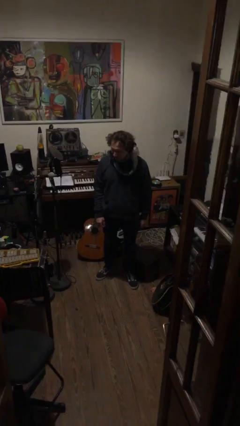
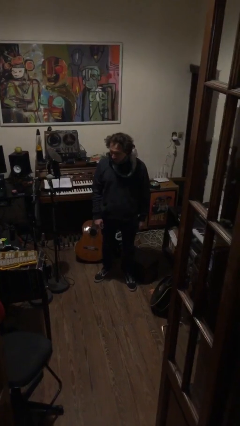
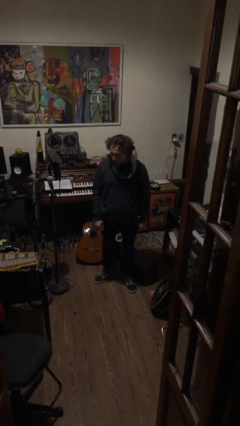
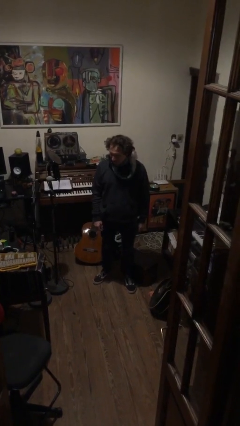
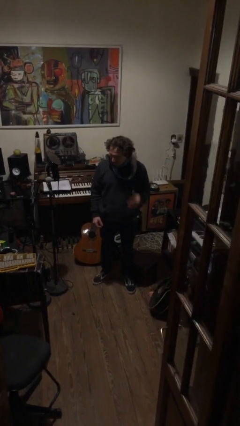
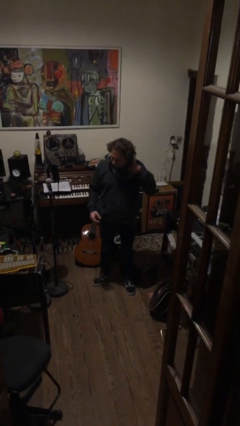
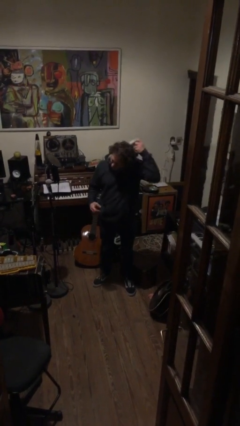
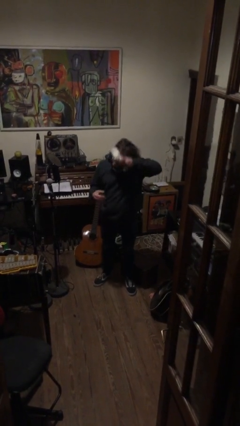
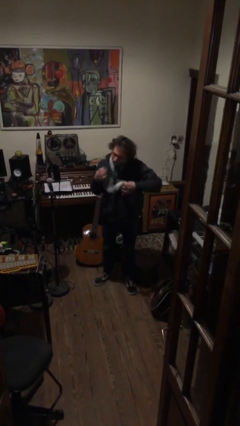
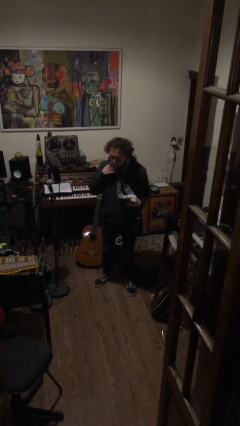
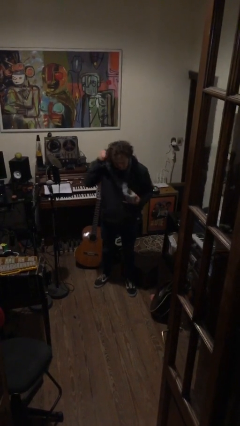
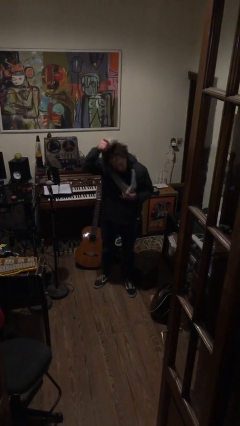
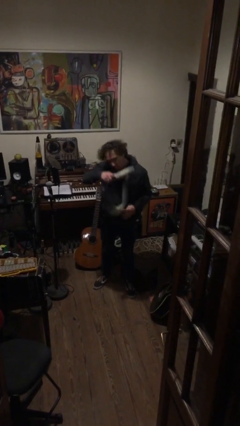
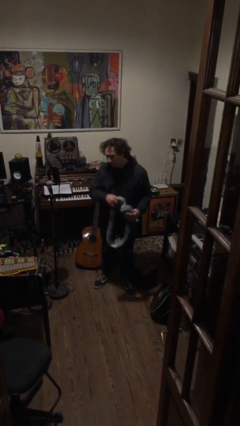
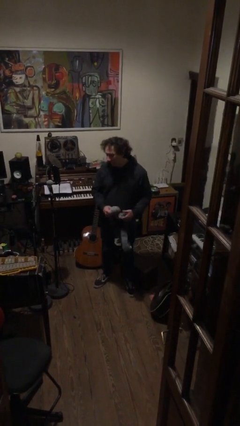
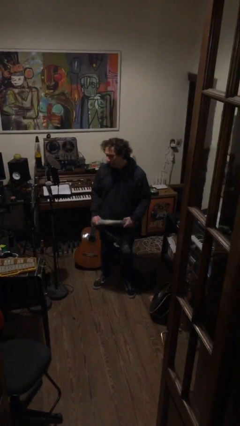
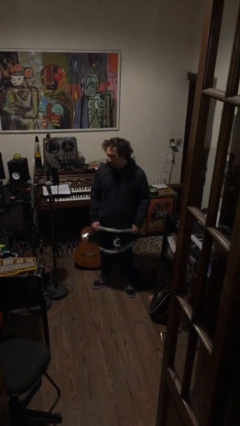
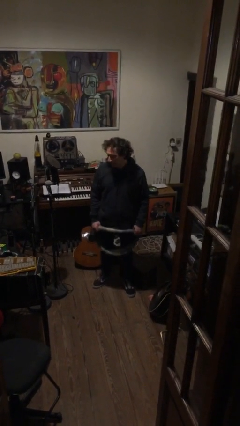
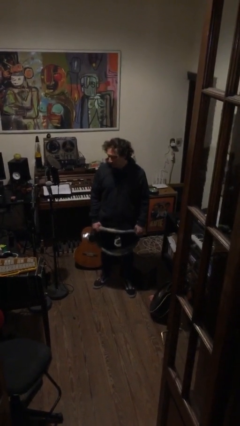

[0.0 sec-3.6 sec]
person takes off scarf

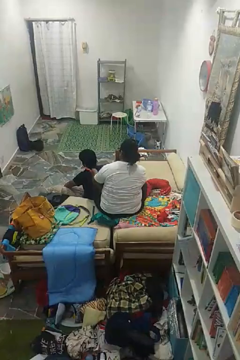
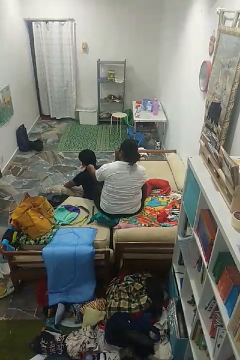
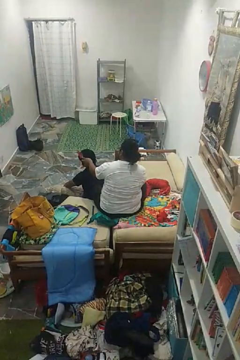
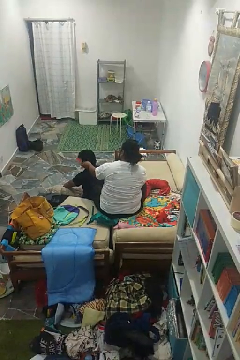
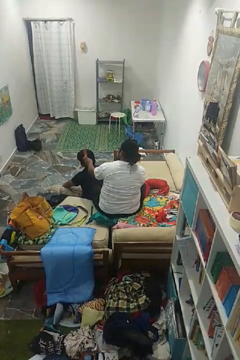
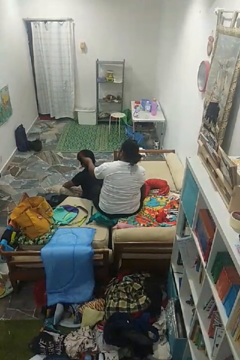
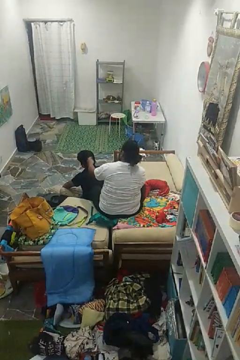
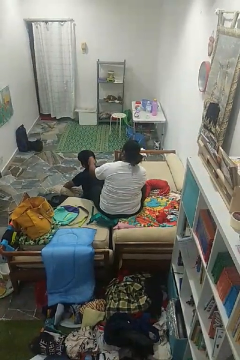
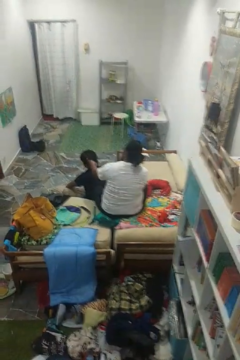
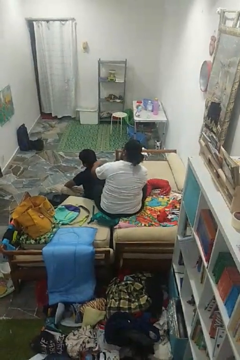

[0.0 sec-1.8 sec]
person brushes hair of person

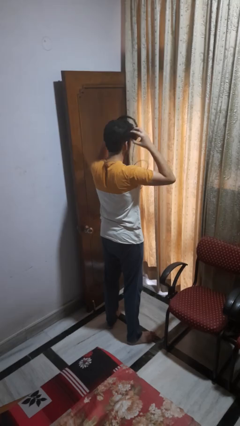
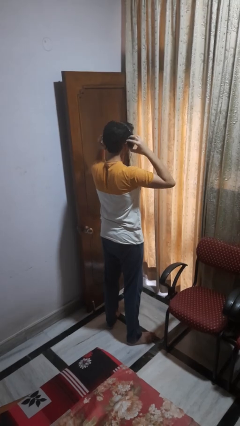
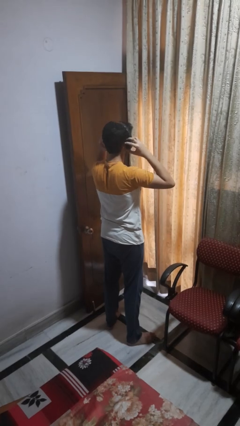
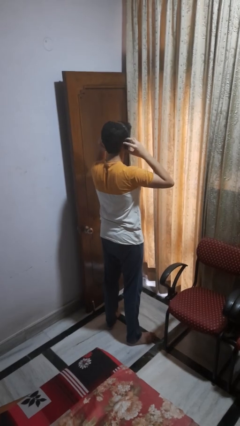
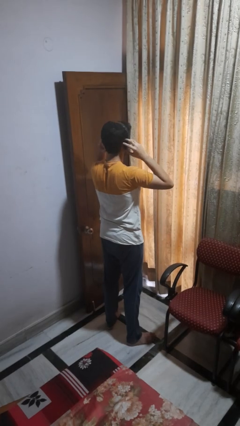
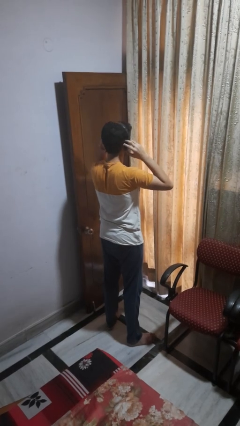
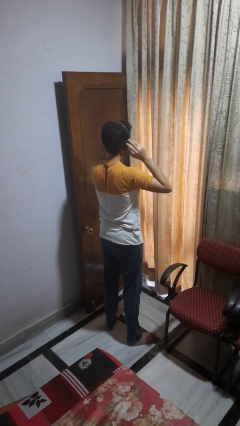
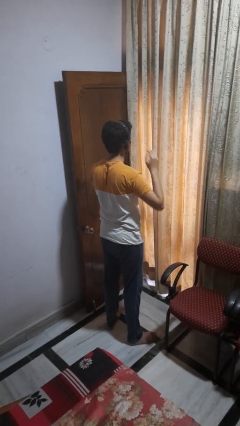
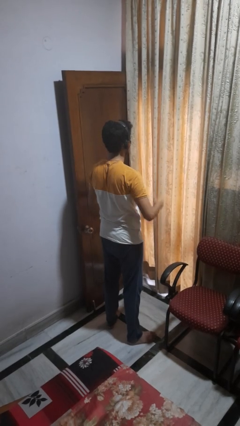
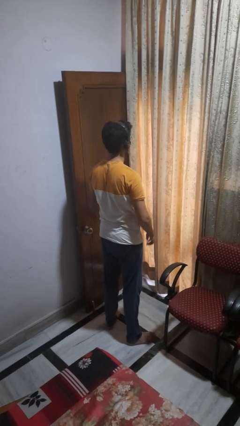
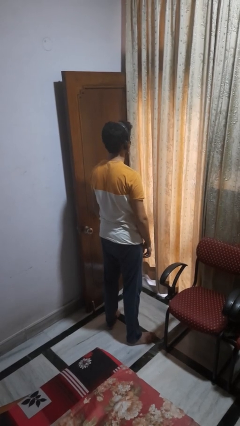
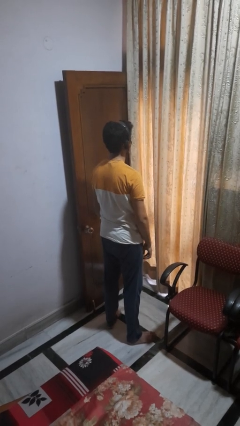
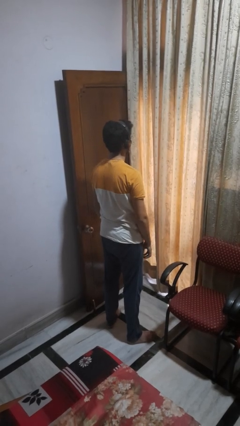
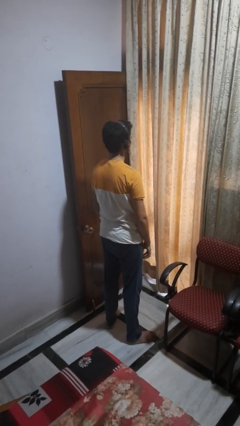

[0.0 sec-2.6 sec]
person puts on headphones

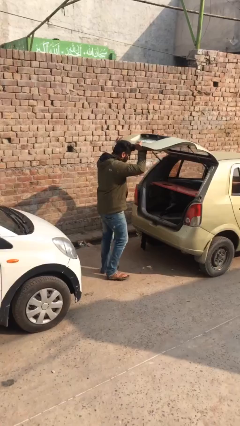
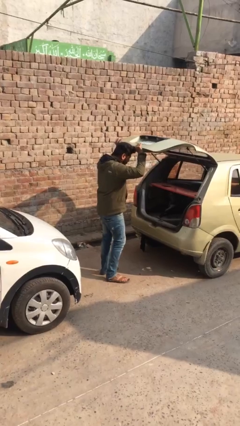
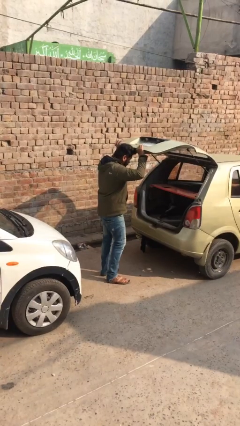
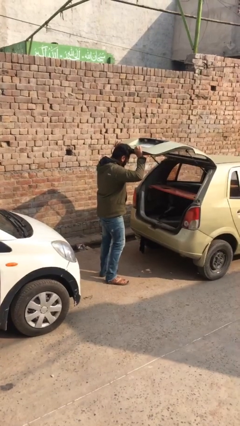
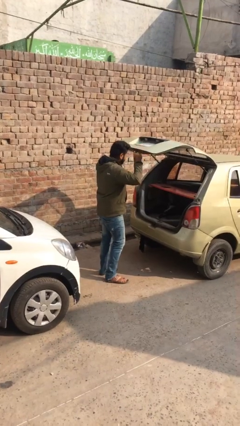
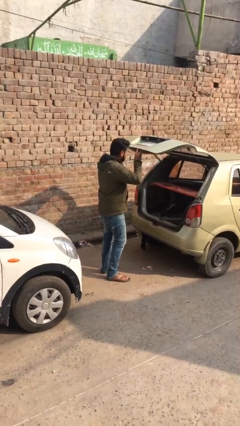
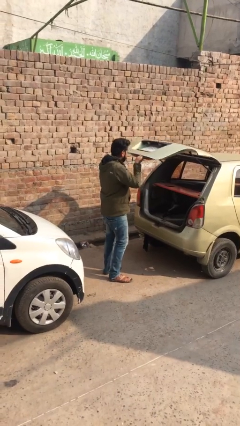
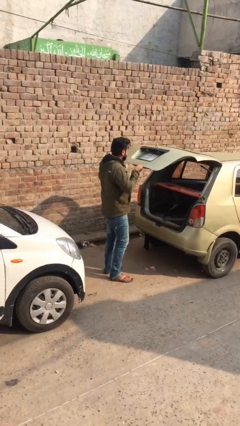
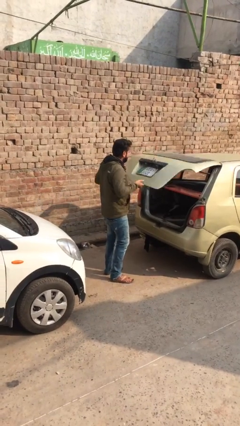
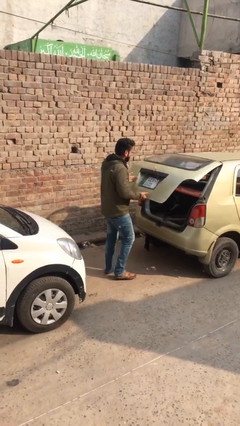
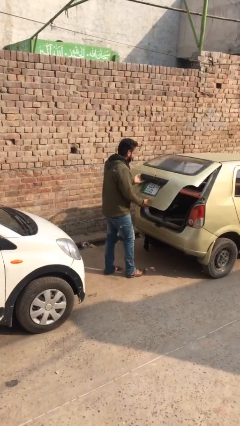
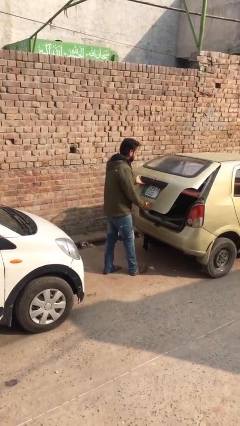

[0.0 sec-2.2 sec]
person closes car trunk

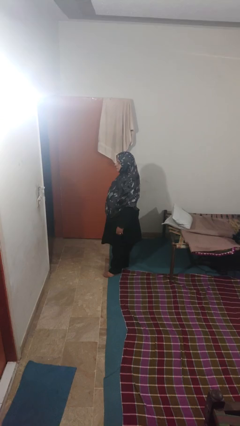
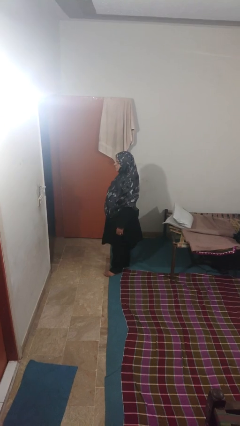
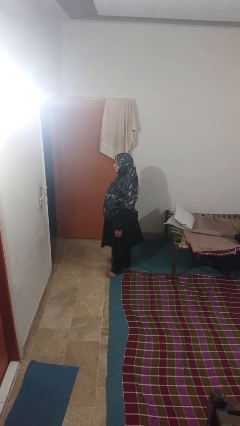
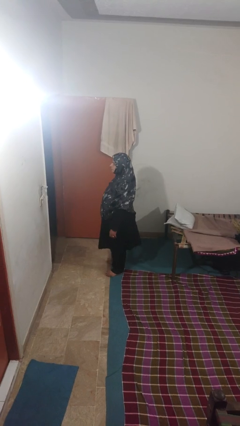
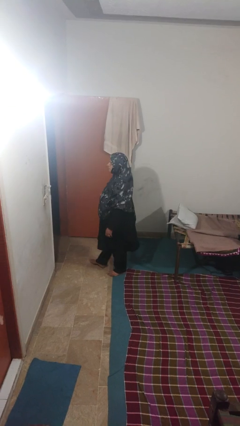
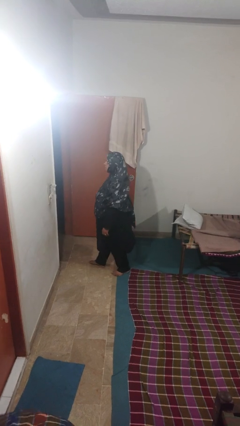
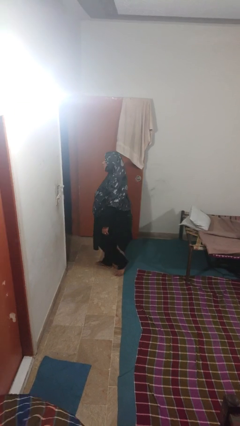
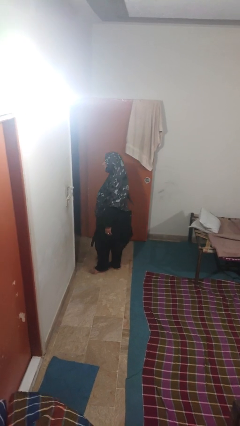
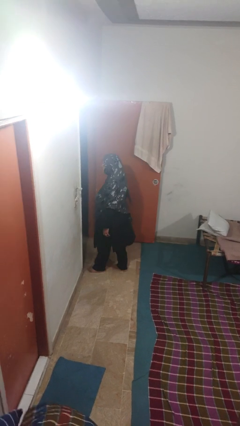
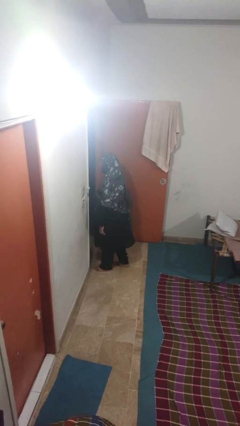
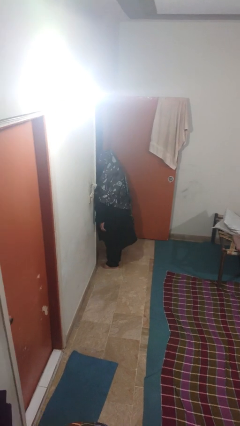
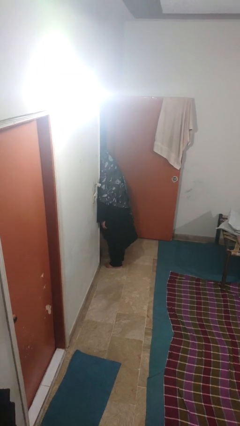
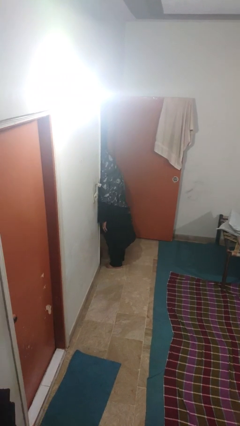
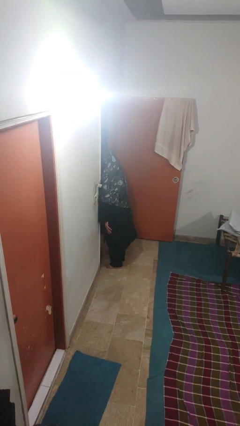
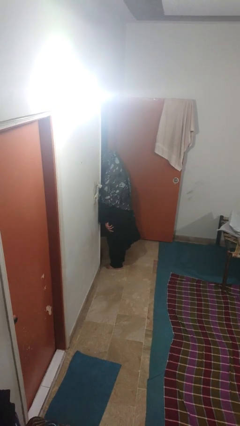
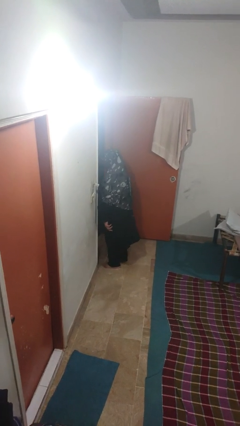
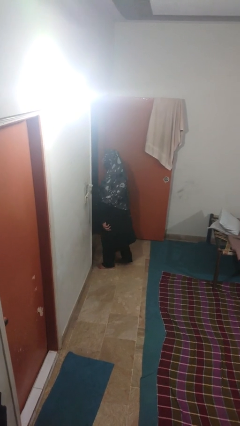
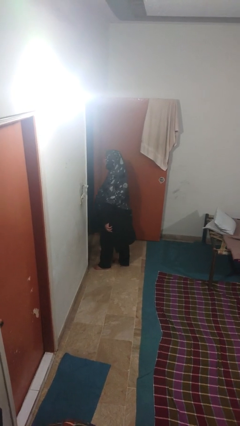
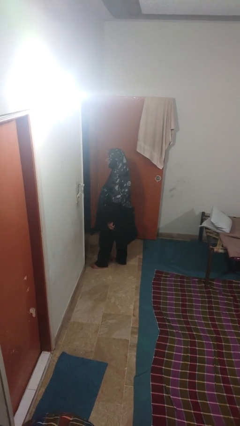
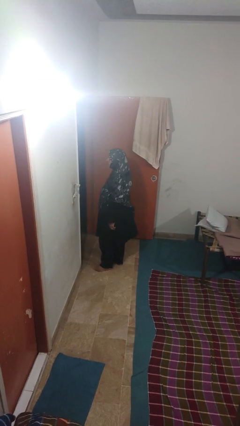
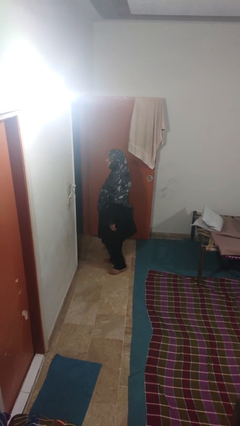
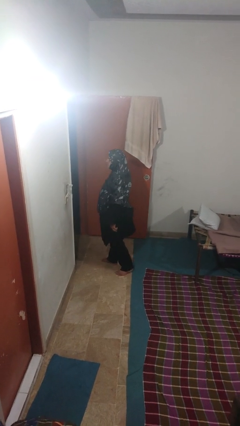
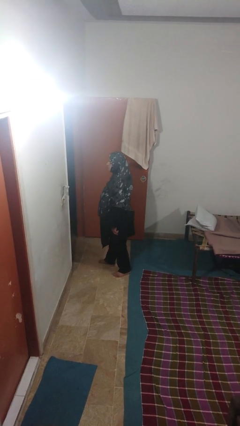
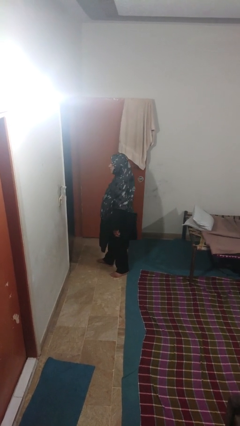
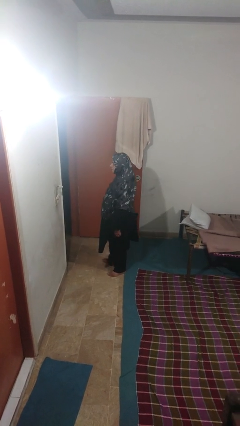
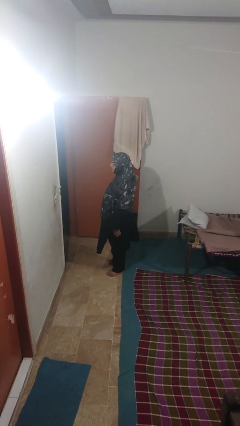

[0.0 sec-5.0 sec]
person bumps into wall

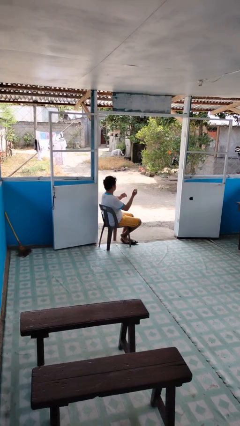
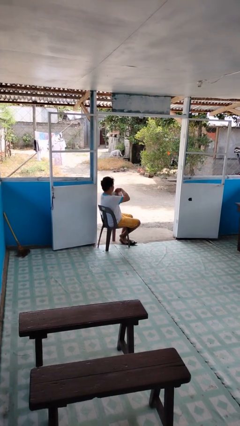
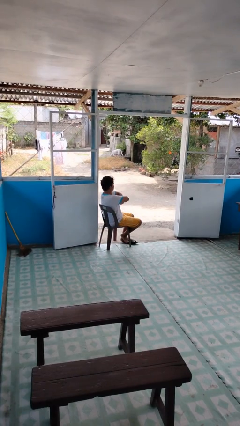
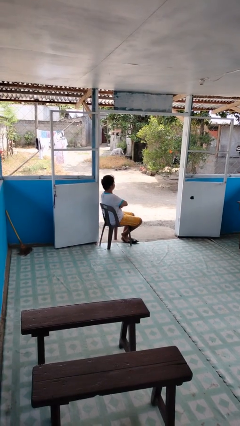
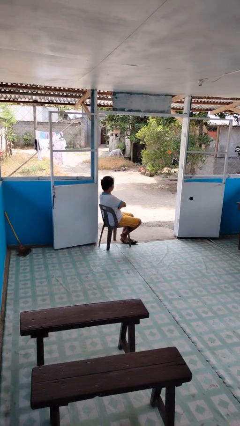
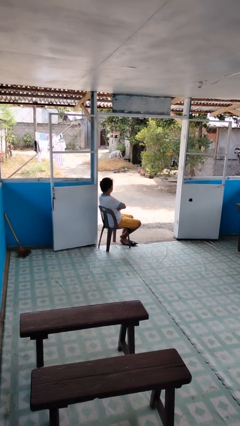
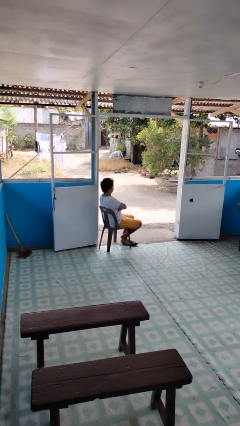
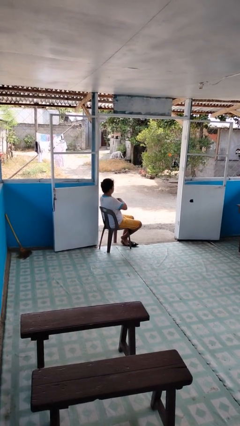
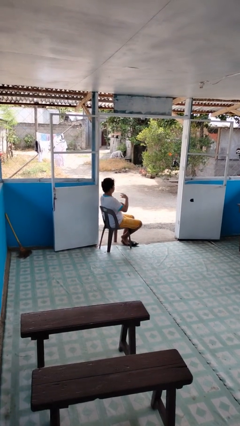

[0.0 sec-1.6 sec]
person crosses arms

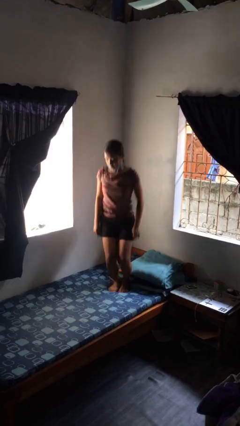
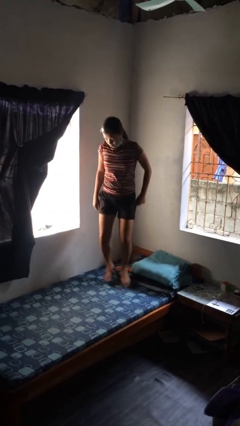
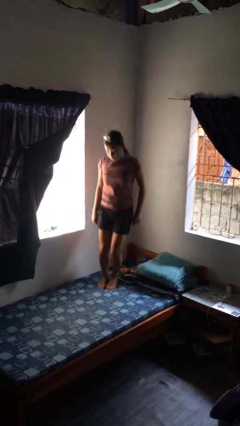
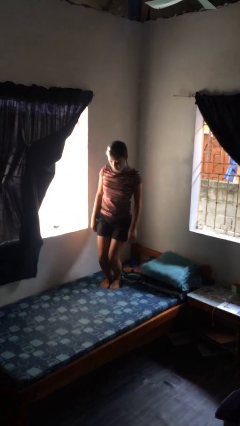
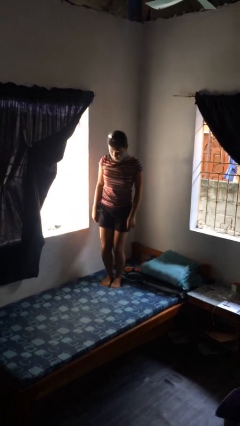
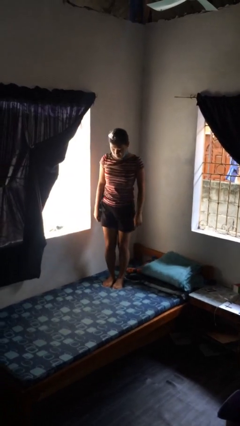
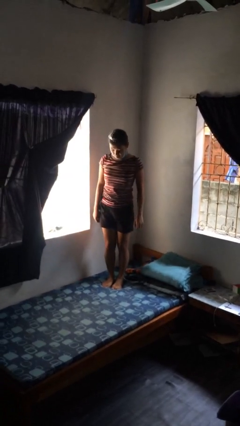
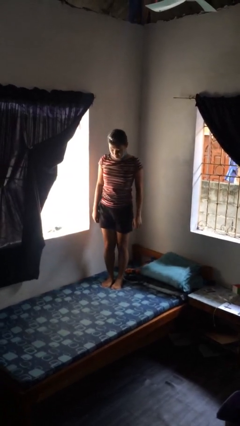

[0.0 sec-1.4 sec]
person jumps on bed
